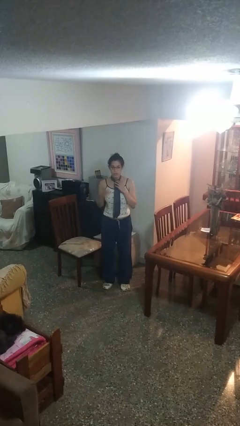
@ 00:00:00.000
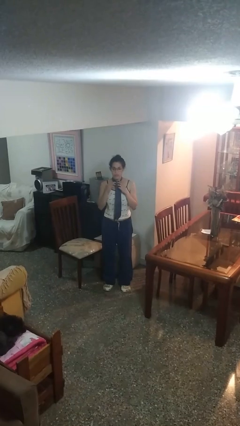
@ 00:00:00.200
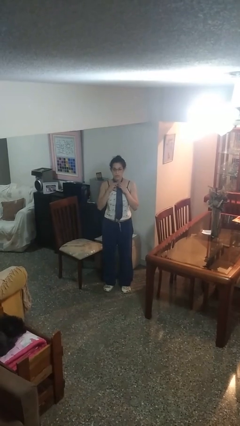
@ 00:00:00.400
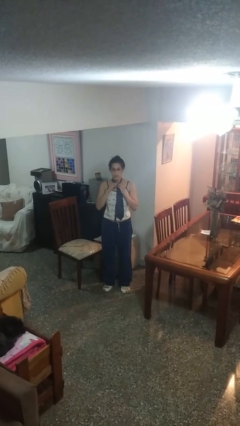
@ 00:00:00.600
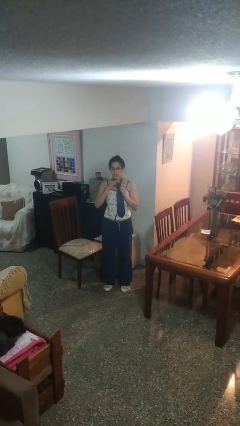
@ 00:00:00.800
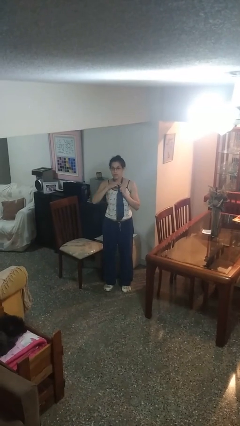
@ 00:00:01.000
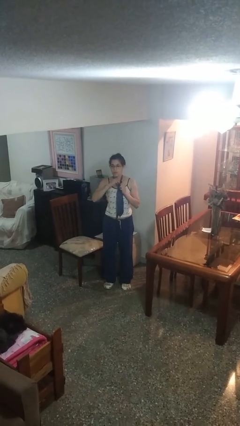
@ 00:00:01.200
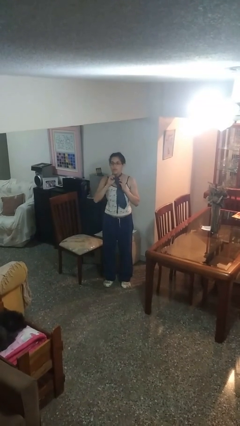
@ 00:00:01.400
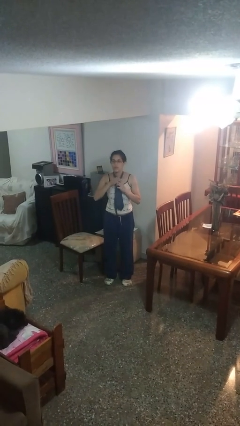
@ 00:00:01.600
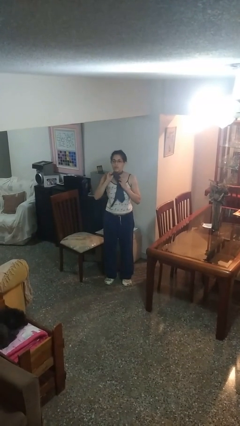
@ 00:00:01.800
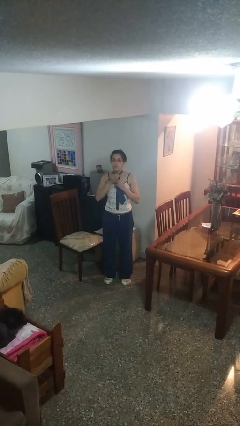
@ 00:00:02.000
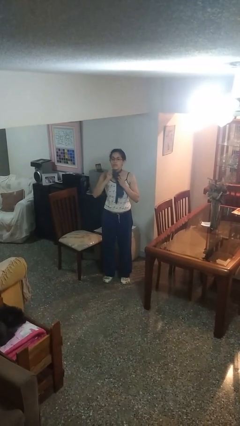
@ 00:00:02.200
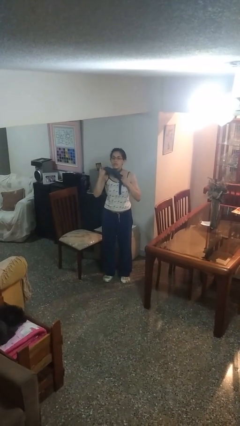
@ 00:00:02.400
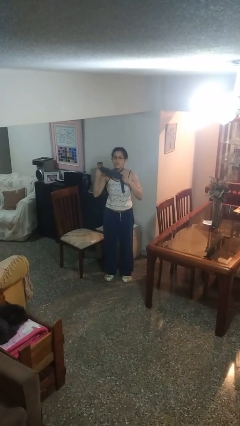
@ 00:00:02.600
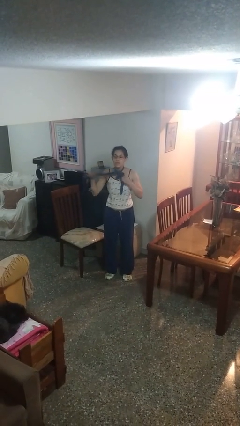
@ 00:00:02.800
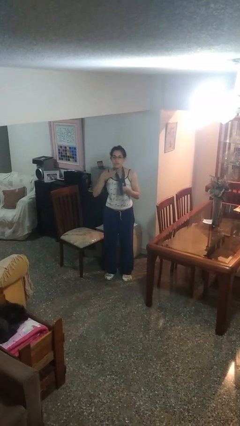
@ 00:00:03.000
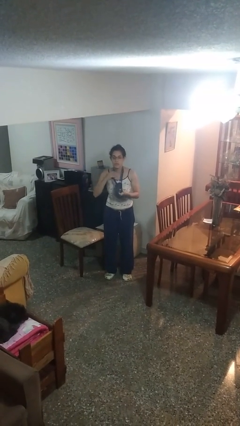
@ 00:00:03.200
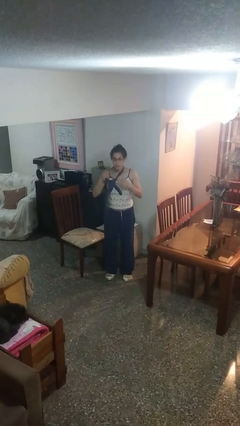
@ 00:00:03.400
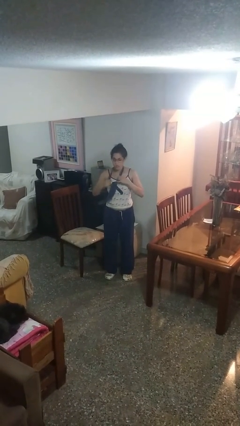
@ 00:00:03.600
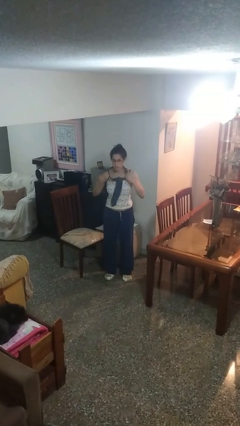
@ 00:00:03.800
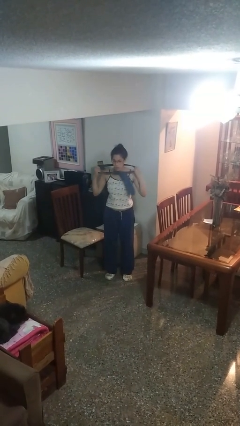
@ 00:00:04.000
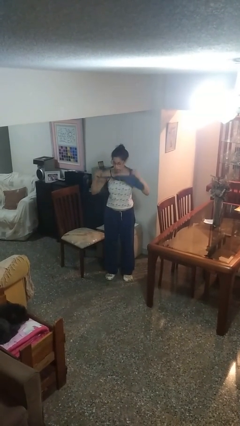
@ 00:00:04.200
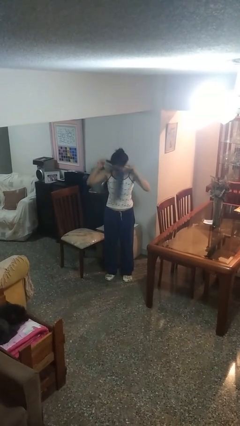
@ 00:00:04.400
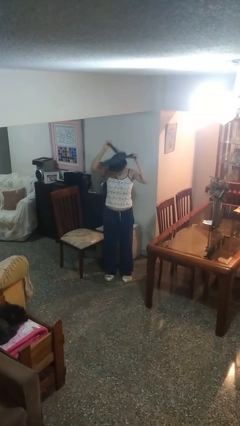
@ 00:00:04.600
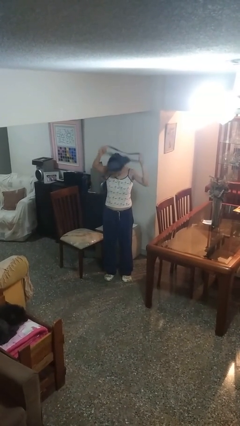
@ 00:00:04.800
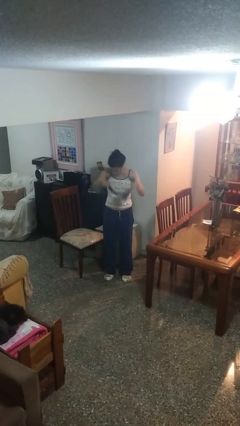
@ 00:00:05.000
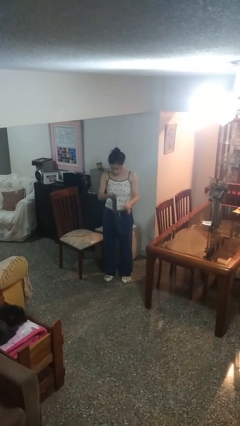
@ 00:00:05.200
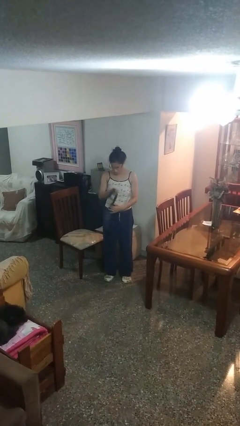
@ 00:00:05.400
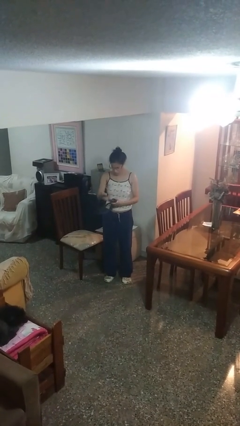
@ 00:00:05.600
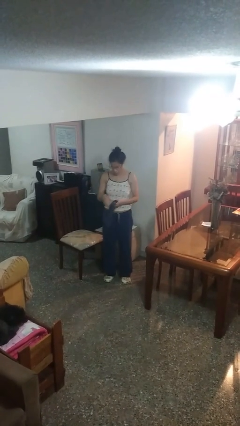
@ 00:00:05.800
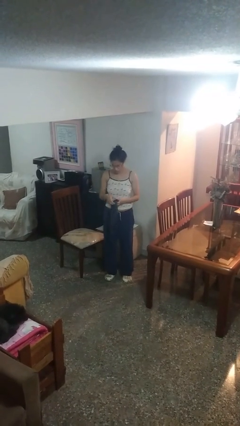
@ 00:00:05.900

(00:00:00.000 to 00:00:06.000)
person takes off necktie

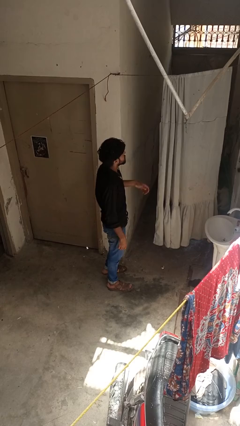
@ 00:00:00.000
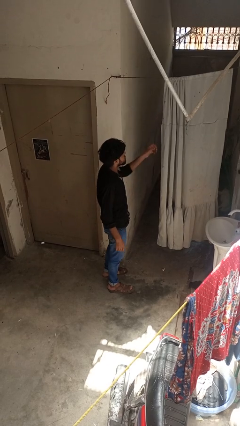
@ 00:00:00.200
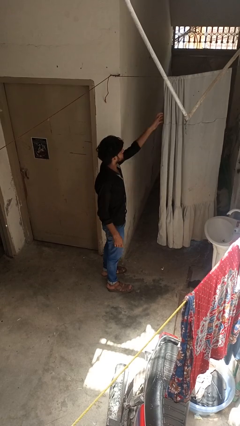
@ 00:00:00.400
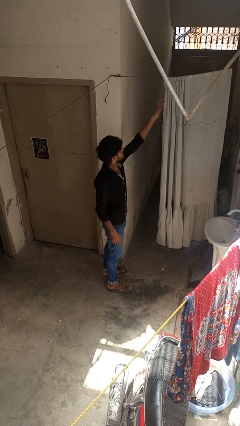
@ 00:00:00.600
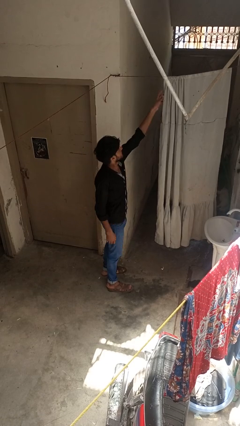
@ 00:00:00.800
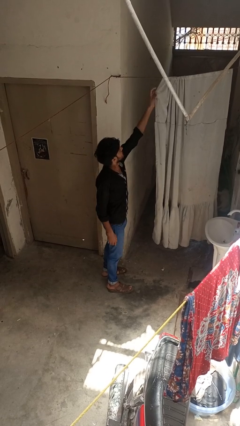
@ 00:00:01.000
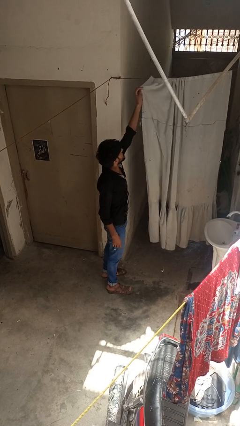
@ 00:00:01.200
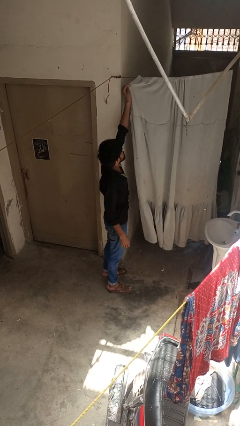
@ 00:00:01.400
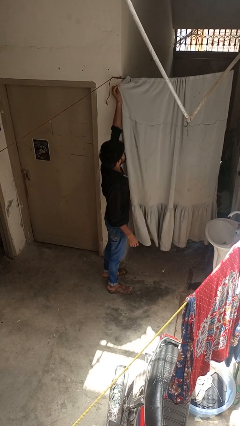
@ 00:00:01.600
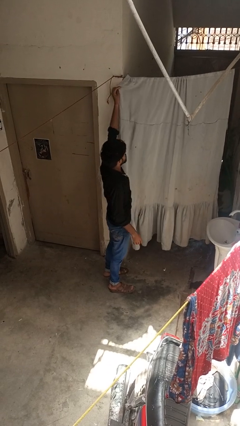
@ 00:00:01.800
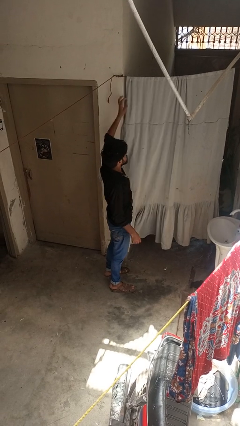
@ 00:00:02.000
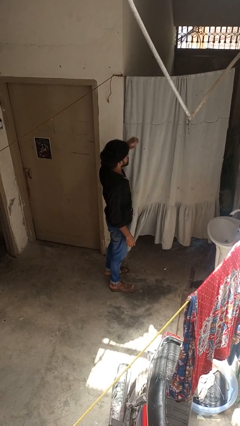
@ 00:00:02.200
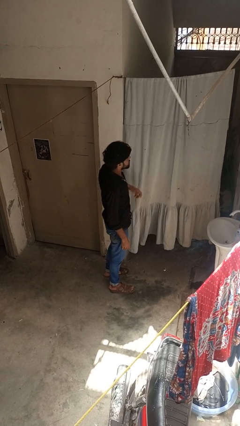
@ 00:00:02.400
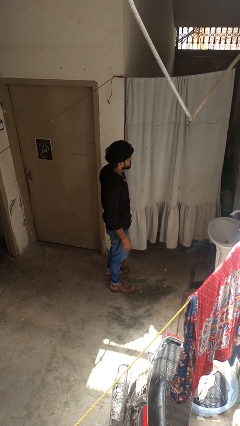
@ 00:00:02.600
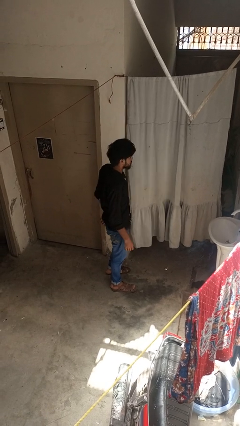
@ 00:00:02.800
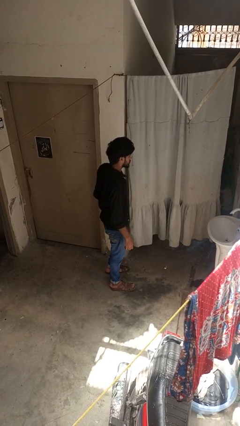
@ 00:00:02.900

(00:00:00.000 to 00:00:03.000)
person closes curtains

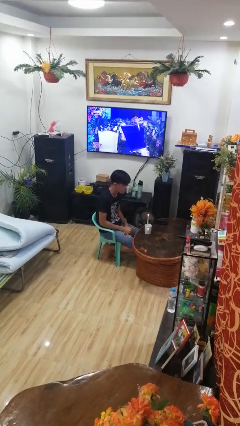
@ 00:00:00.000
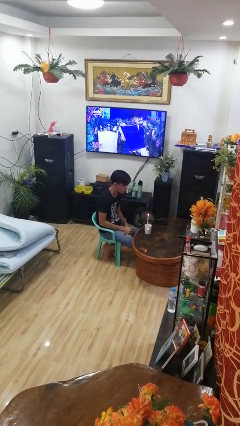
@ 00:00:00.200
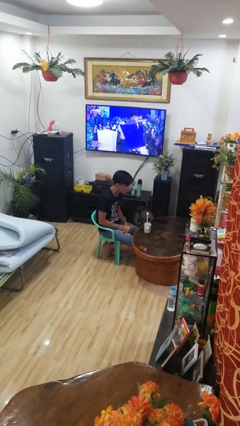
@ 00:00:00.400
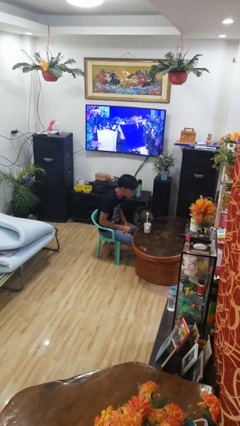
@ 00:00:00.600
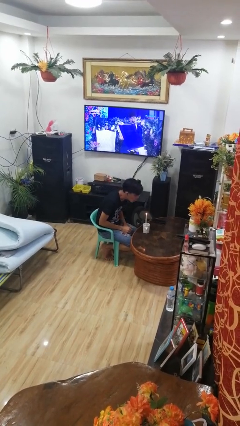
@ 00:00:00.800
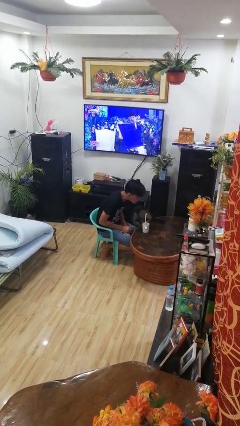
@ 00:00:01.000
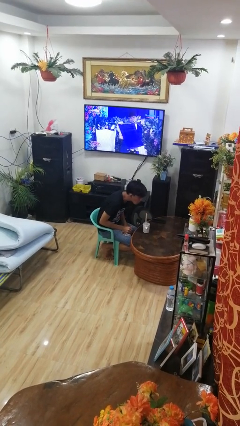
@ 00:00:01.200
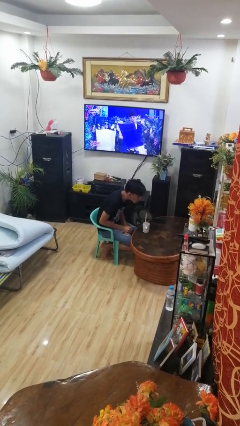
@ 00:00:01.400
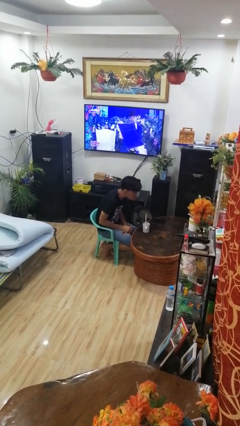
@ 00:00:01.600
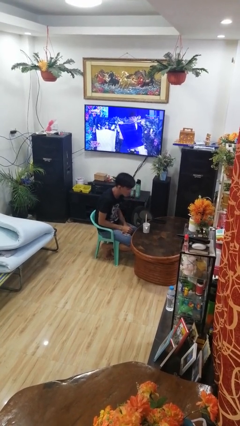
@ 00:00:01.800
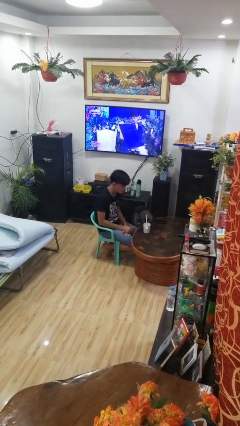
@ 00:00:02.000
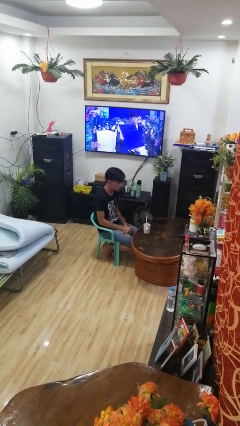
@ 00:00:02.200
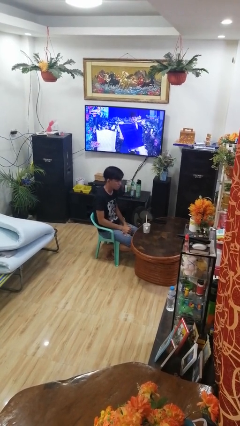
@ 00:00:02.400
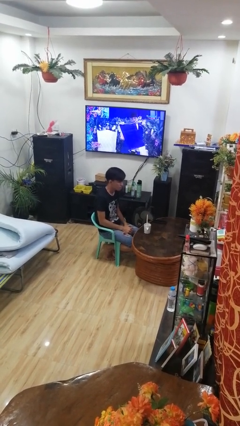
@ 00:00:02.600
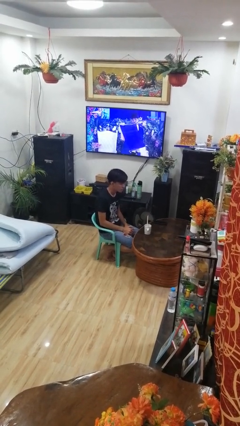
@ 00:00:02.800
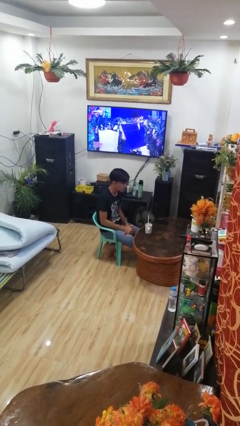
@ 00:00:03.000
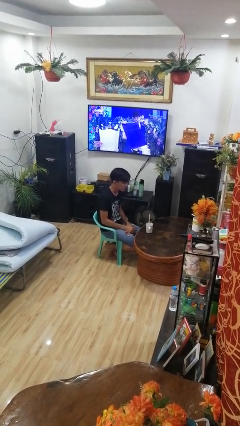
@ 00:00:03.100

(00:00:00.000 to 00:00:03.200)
person extinguishes candle

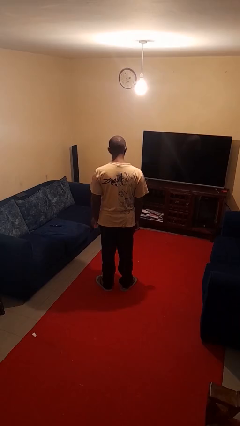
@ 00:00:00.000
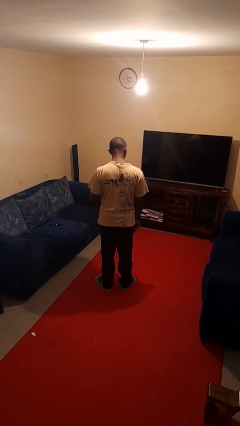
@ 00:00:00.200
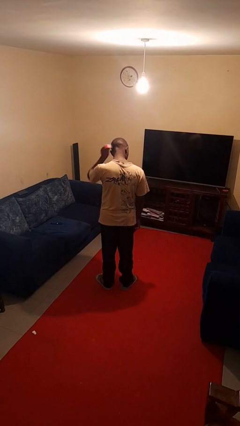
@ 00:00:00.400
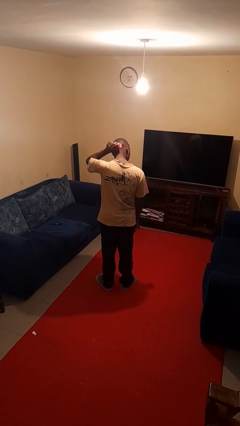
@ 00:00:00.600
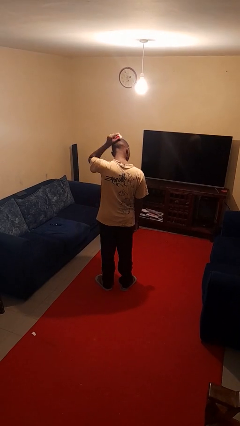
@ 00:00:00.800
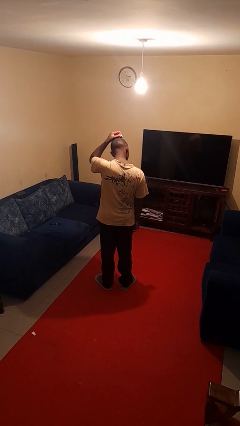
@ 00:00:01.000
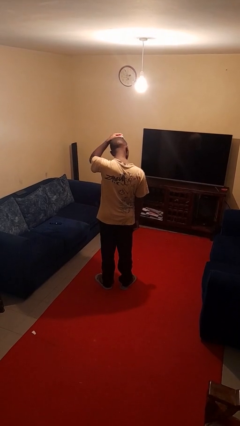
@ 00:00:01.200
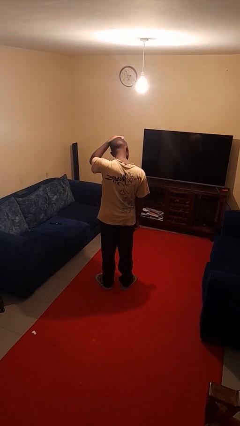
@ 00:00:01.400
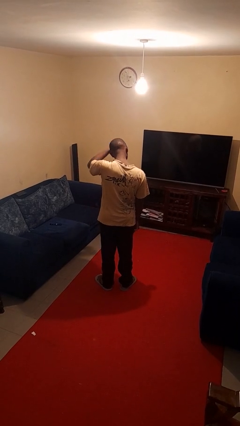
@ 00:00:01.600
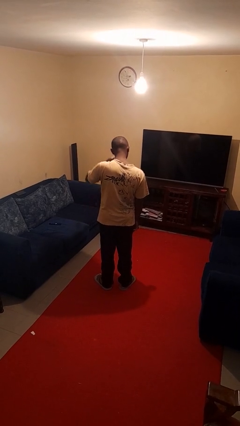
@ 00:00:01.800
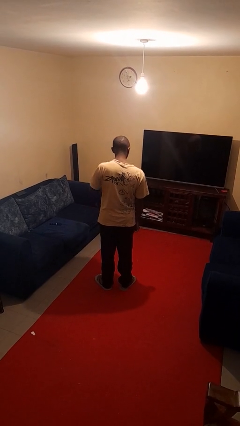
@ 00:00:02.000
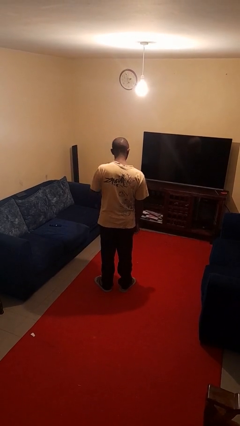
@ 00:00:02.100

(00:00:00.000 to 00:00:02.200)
person brushes hair

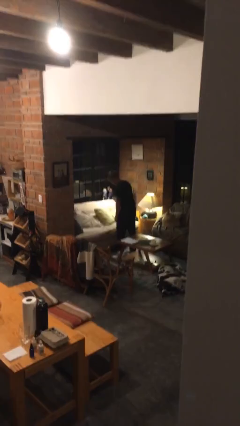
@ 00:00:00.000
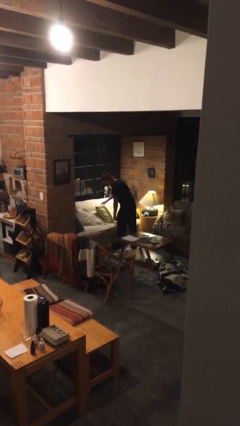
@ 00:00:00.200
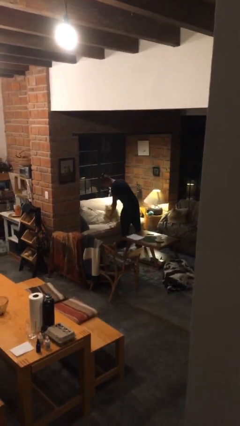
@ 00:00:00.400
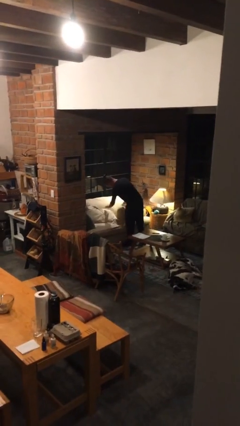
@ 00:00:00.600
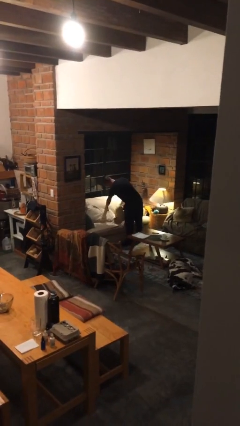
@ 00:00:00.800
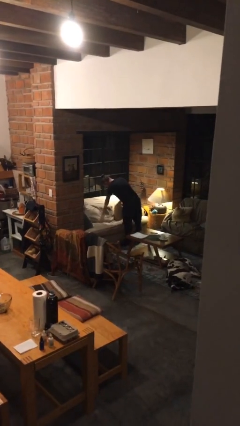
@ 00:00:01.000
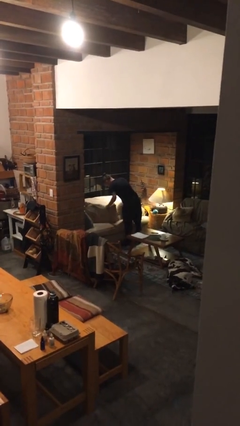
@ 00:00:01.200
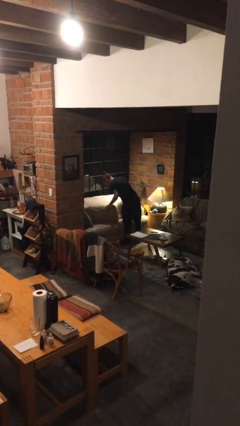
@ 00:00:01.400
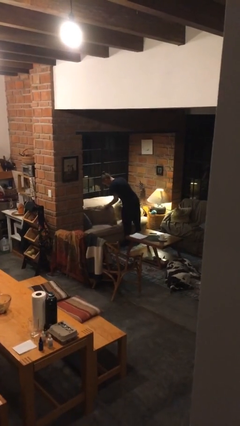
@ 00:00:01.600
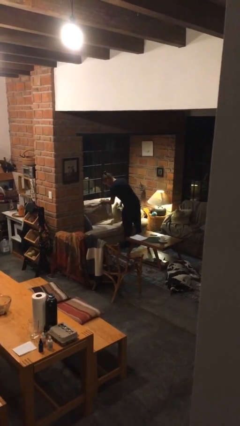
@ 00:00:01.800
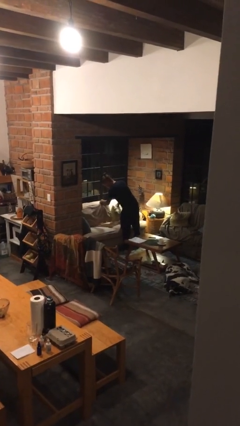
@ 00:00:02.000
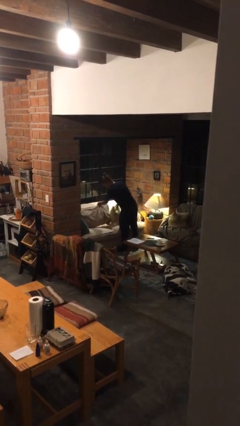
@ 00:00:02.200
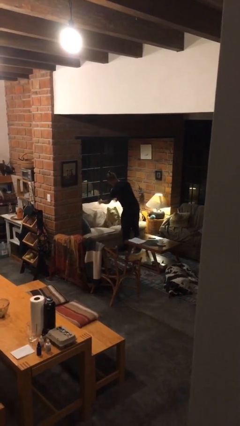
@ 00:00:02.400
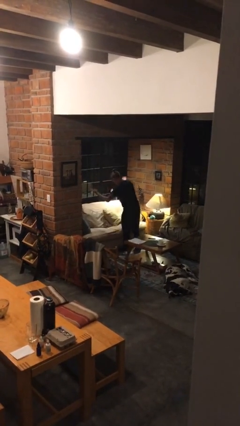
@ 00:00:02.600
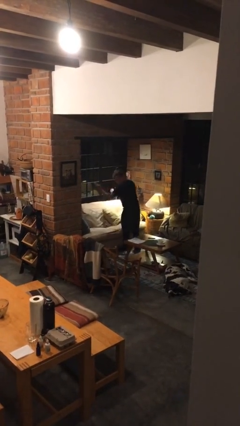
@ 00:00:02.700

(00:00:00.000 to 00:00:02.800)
person searches in couch
